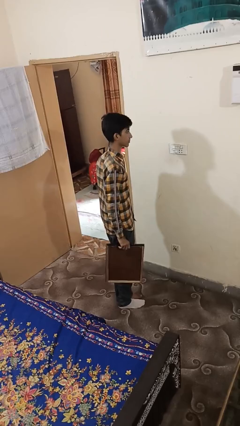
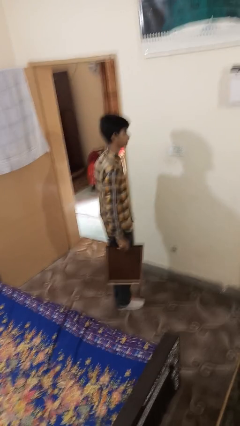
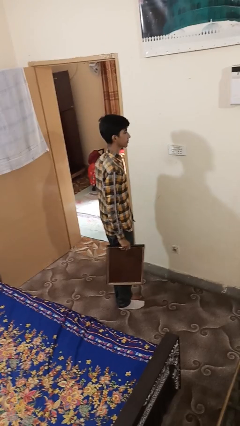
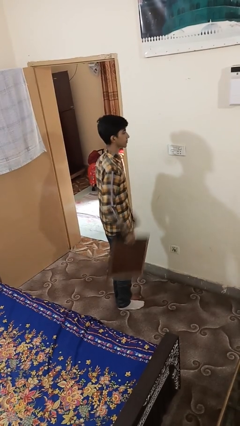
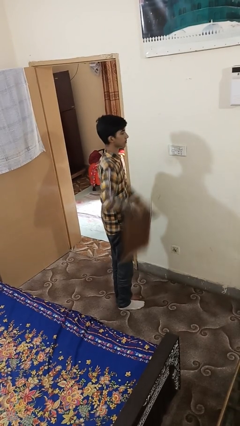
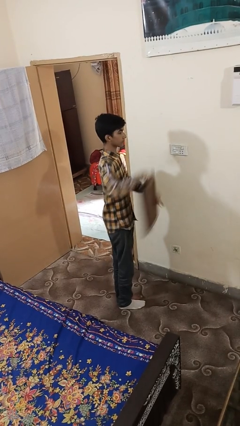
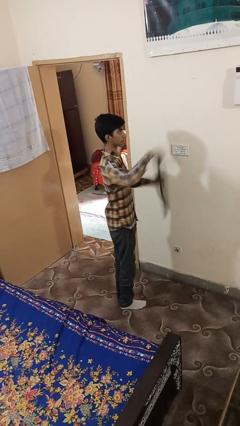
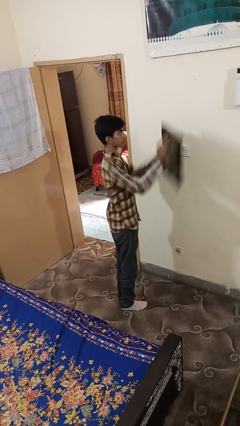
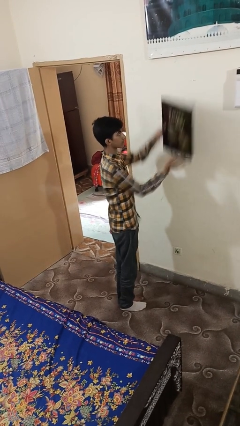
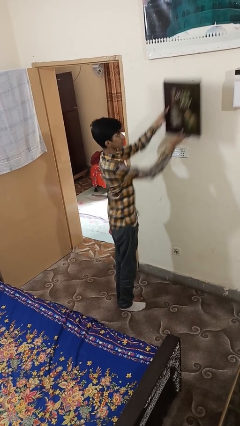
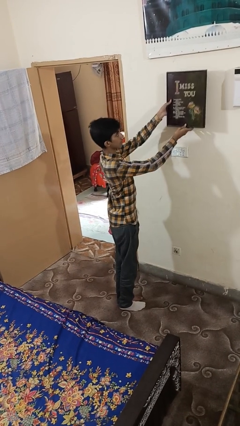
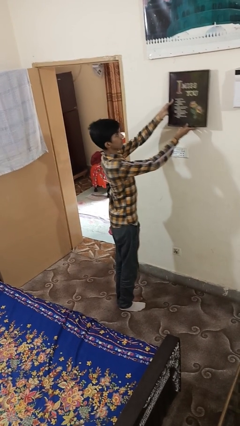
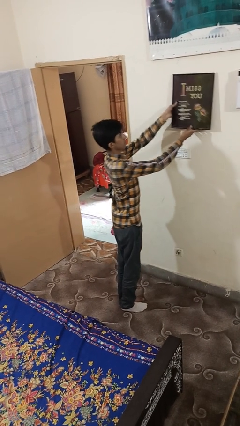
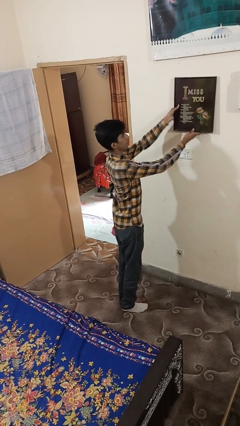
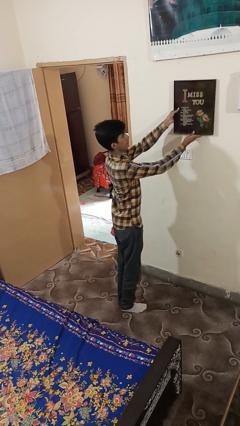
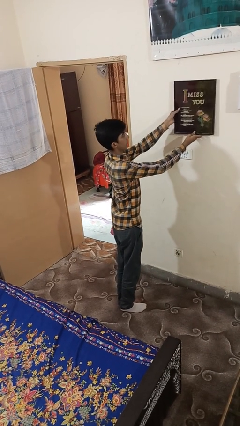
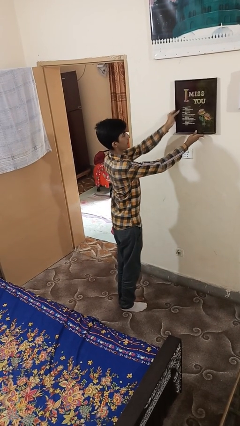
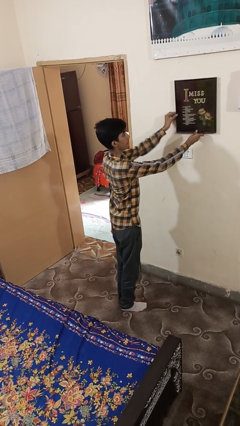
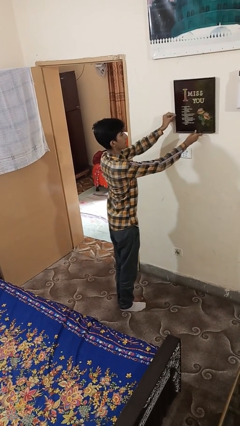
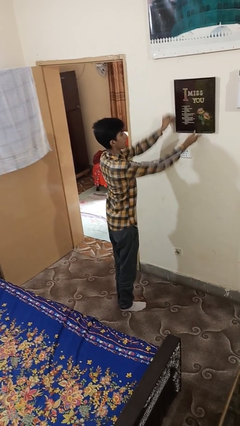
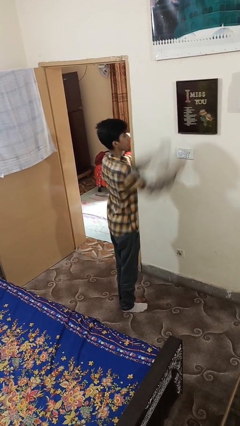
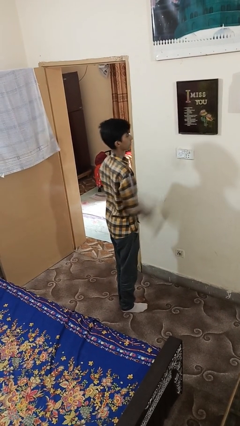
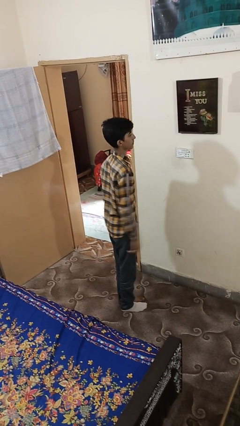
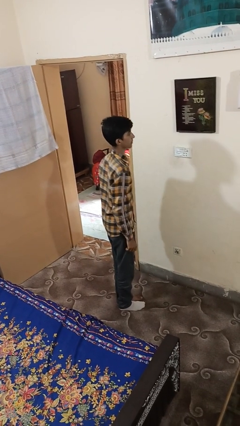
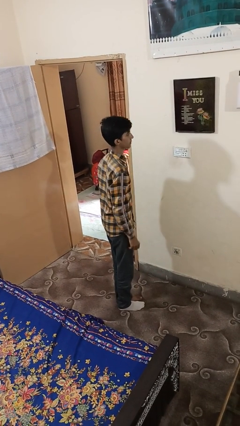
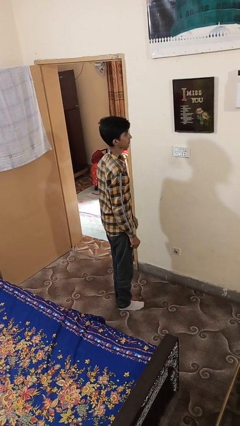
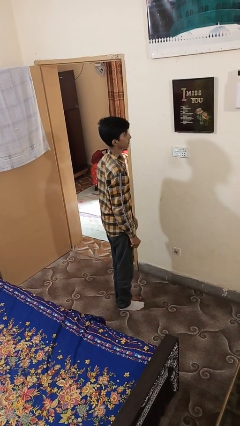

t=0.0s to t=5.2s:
person puts up picture frame

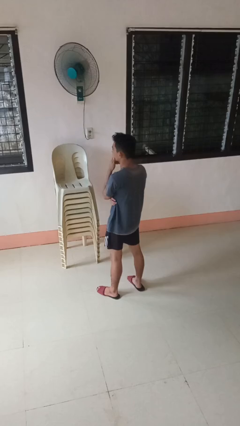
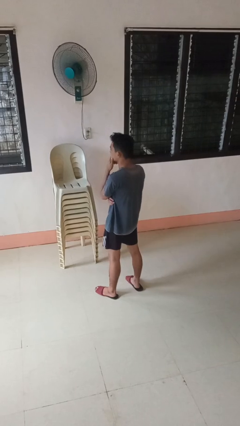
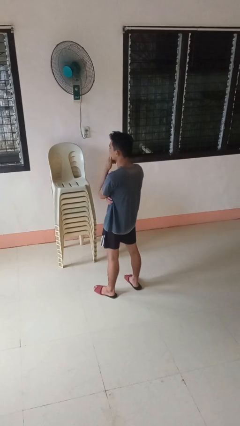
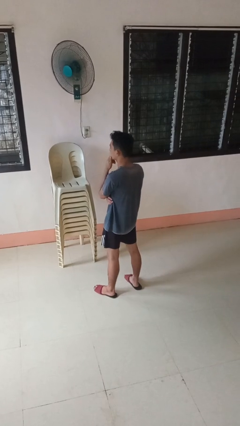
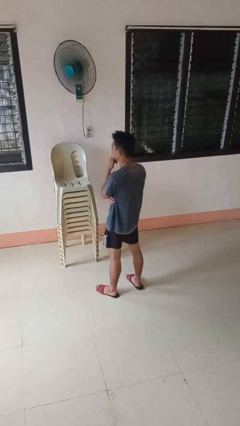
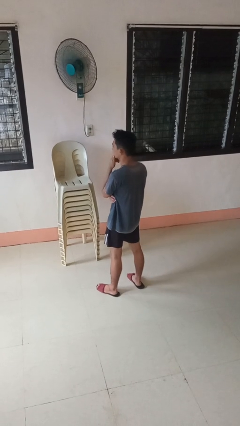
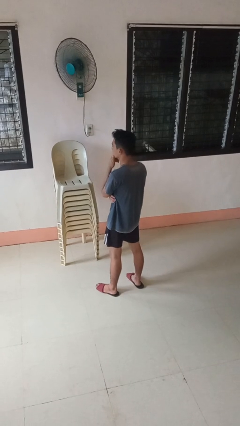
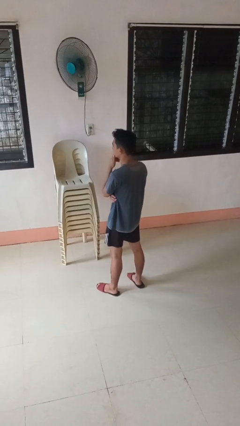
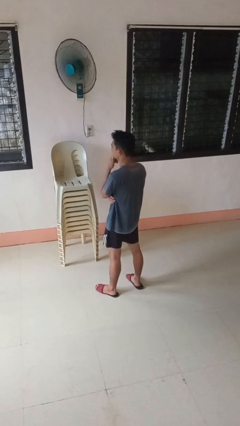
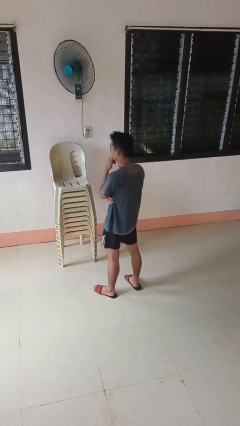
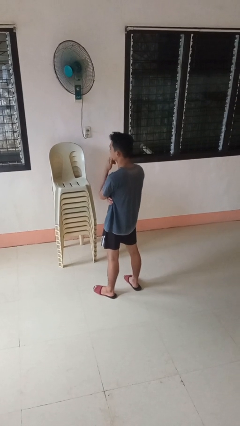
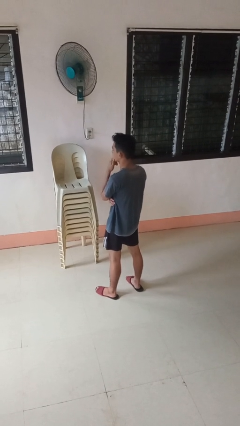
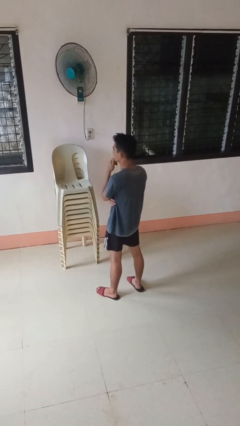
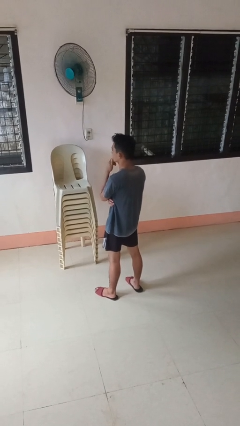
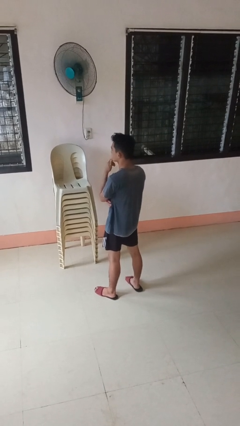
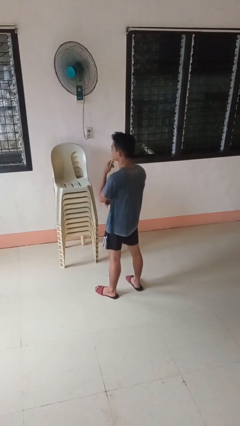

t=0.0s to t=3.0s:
person strokes chin

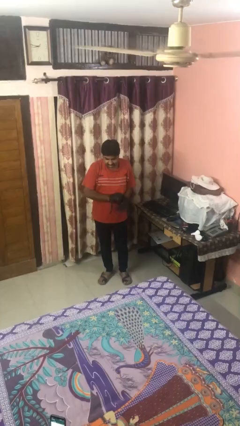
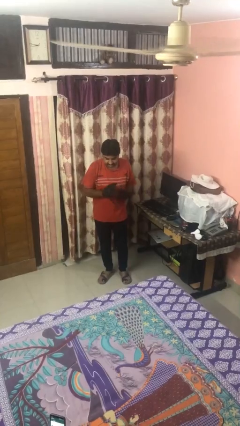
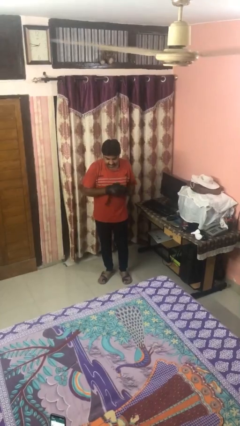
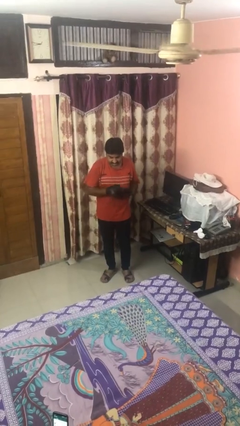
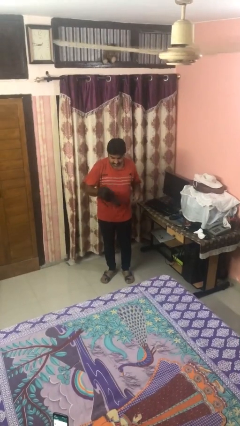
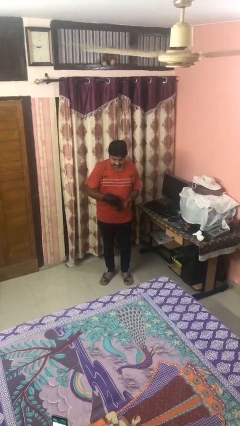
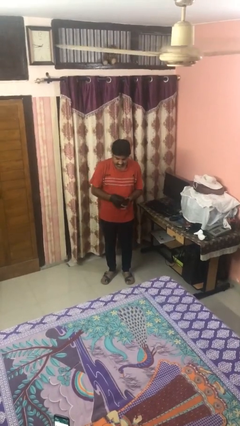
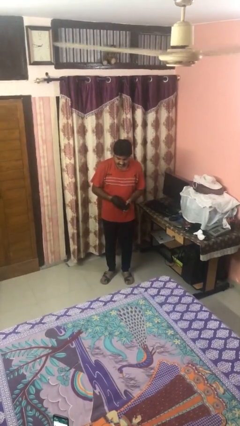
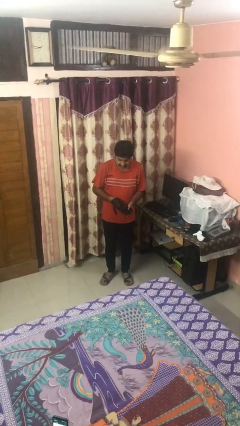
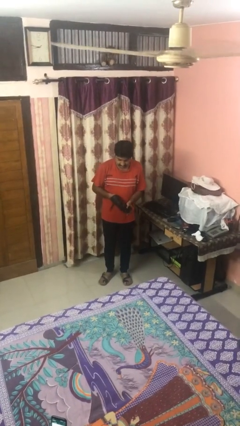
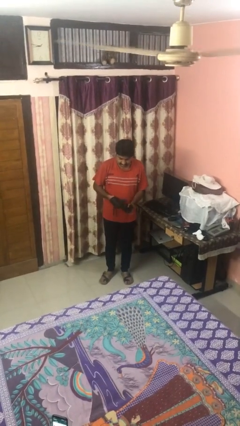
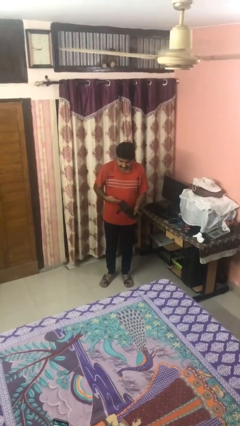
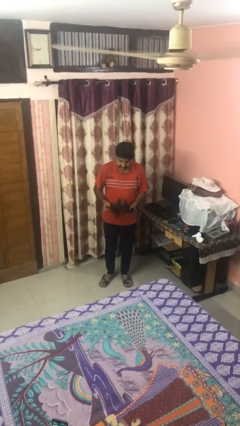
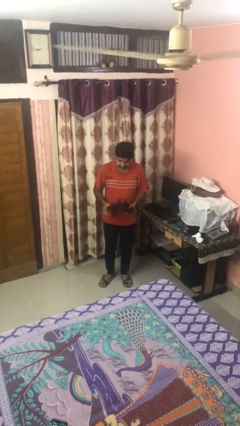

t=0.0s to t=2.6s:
person takes off gloves

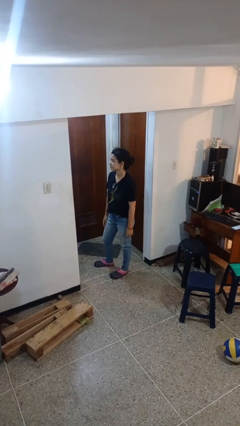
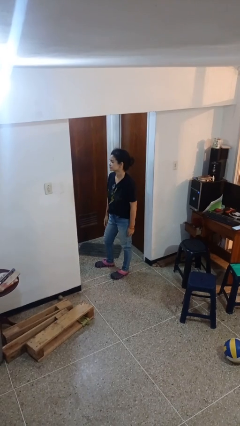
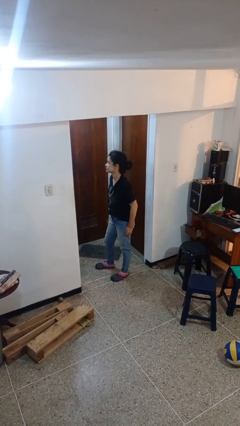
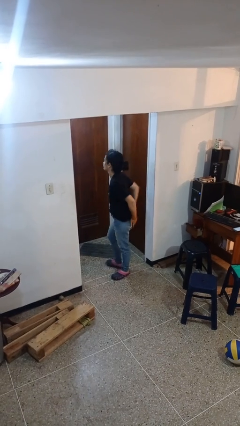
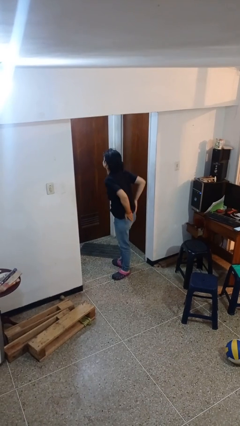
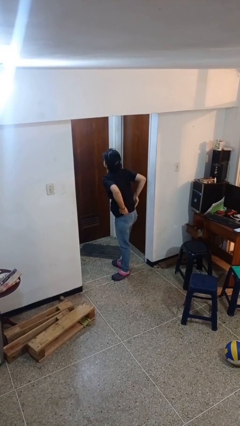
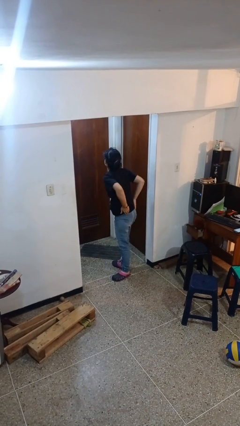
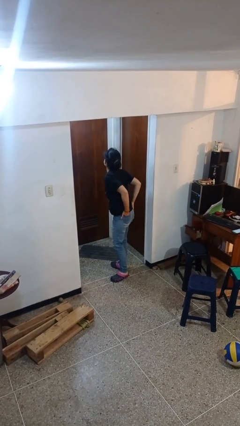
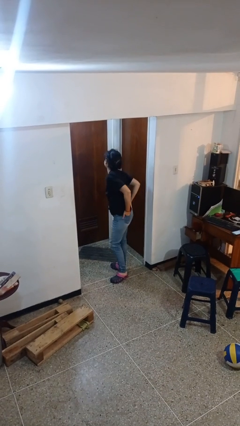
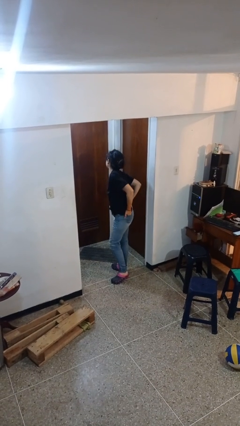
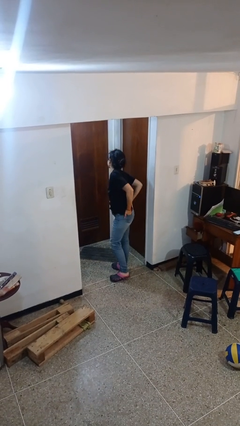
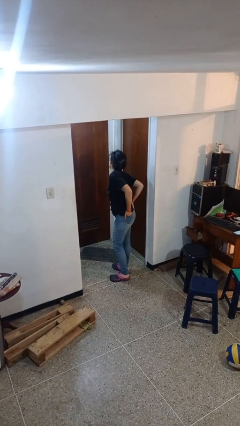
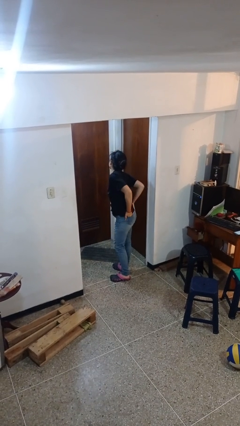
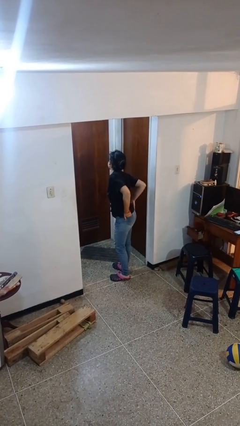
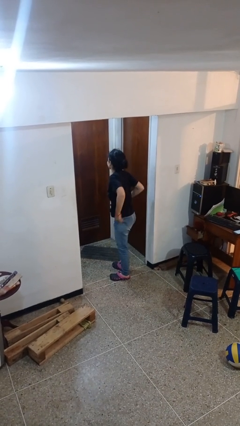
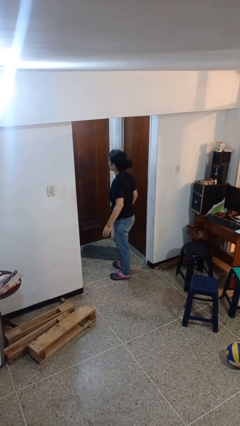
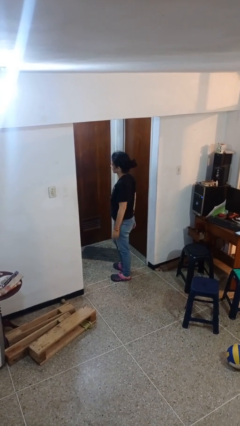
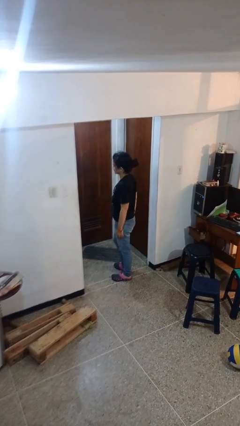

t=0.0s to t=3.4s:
person puts hands in back pockets

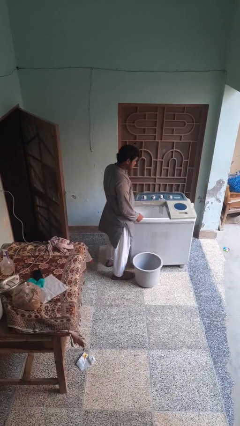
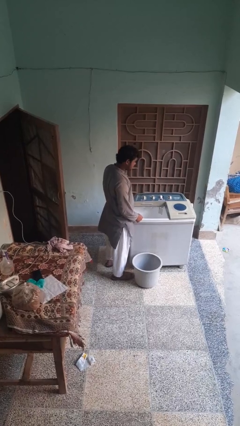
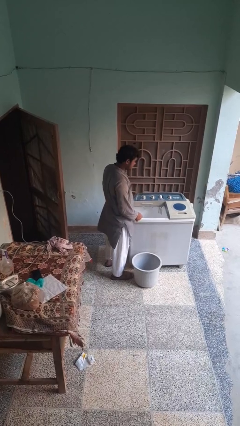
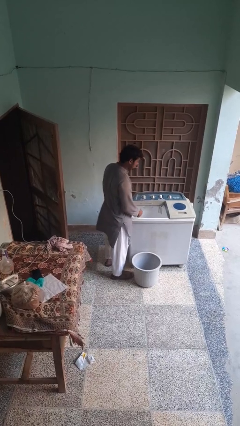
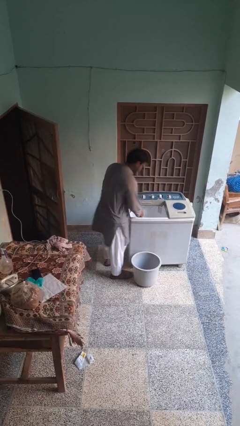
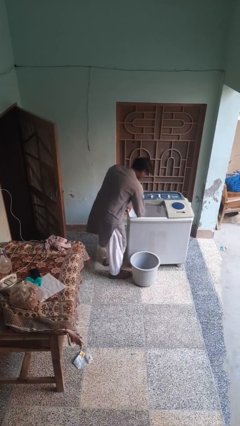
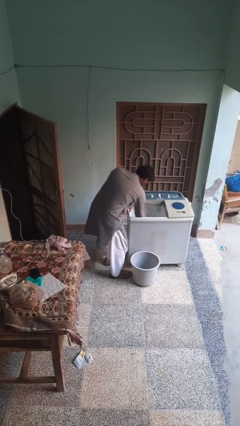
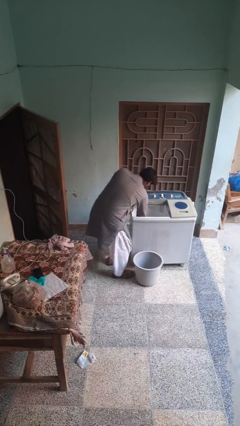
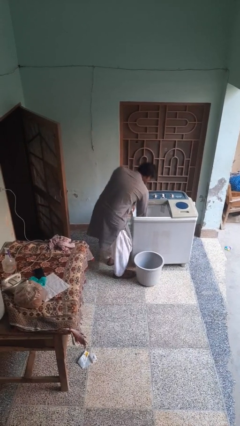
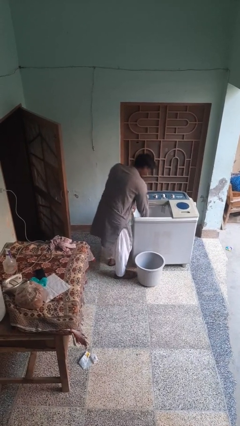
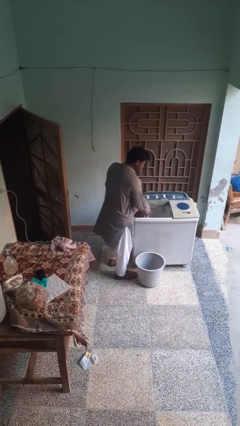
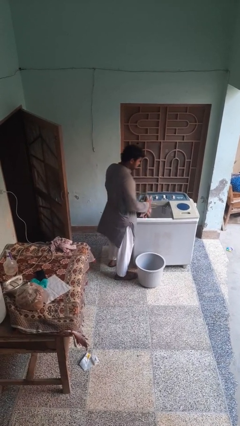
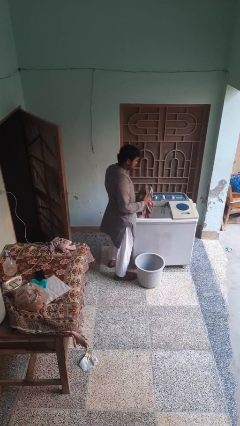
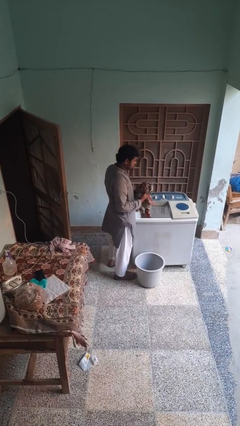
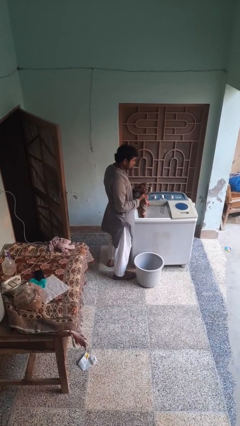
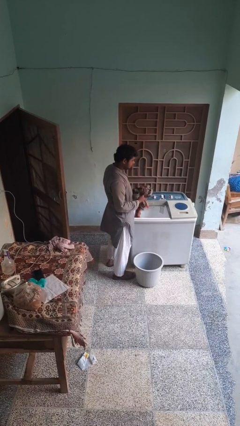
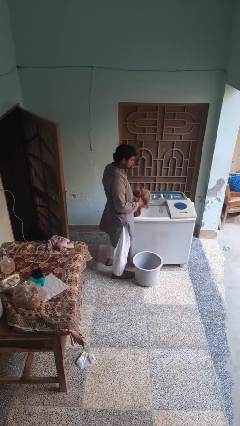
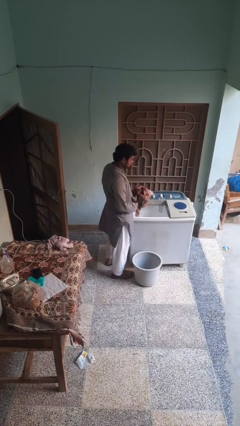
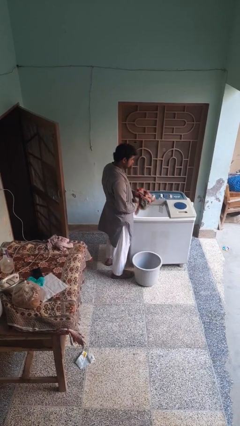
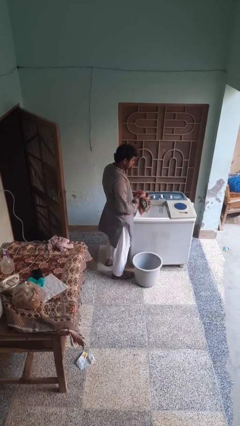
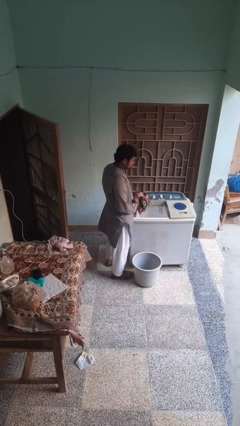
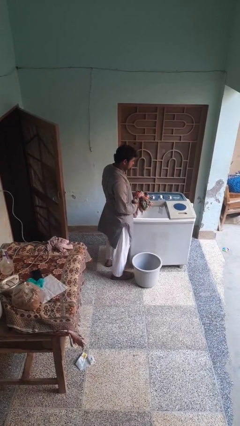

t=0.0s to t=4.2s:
person unloads clotheswasher
